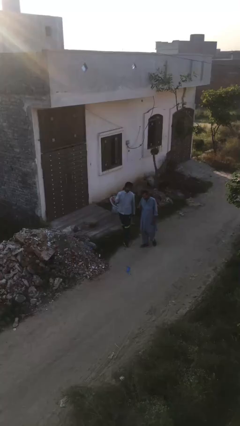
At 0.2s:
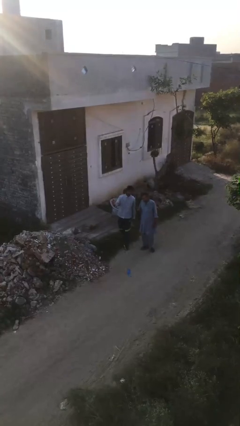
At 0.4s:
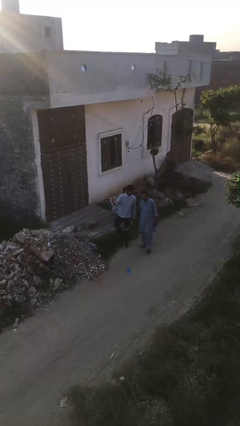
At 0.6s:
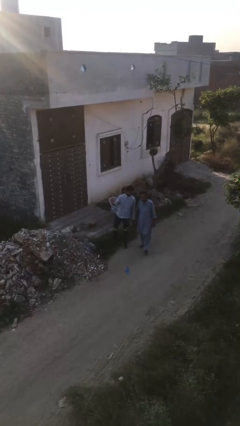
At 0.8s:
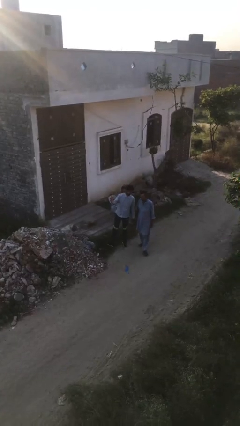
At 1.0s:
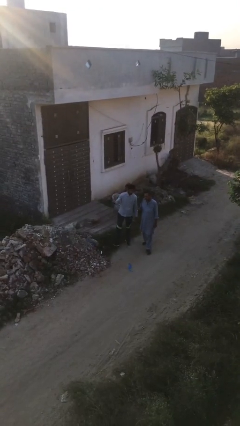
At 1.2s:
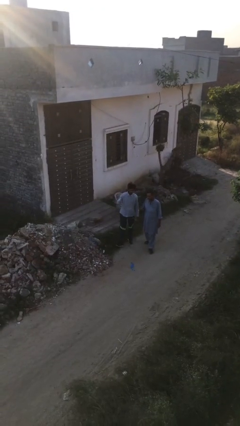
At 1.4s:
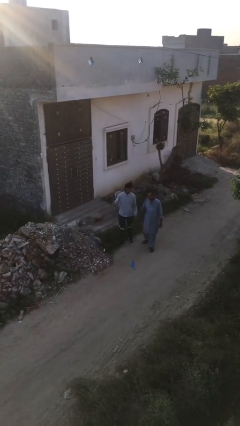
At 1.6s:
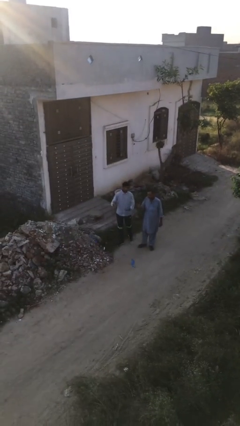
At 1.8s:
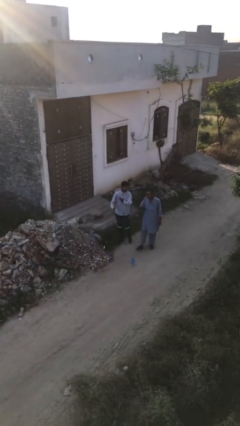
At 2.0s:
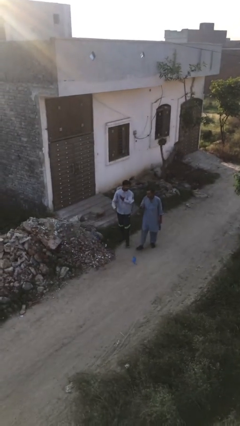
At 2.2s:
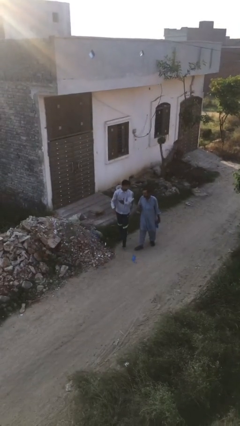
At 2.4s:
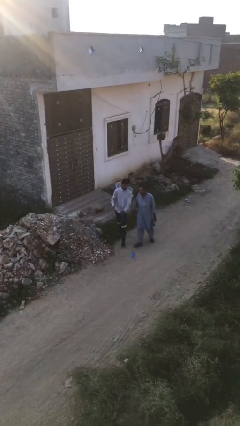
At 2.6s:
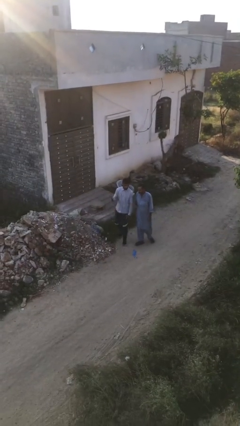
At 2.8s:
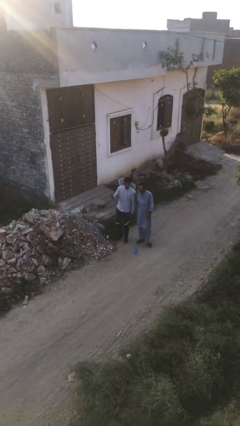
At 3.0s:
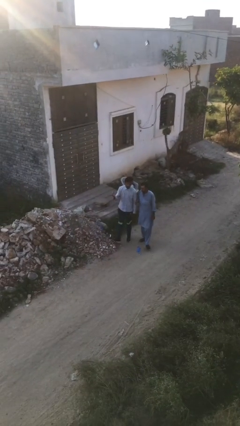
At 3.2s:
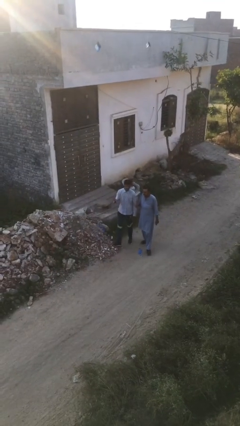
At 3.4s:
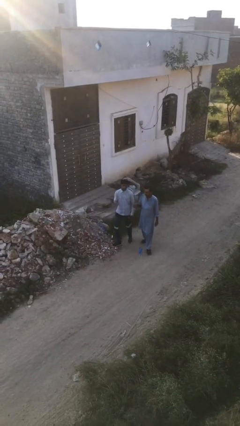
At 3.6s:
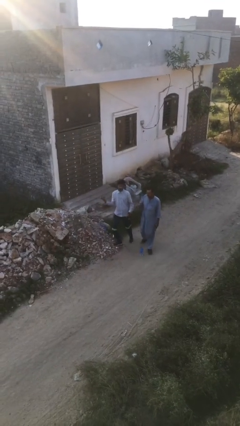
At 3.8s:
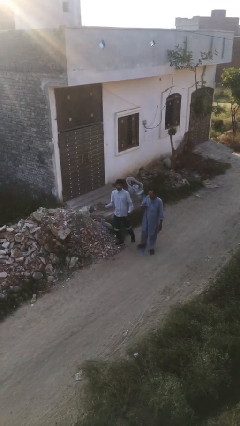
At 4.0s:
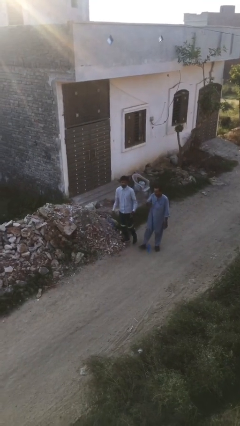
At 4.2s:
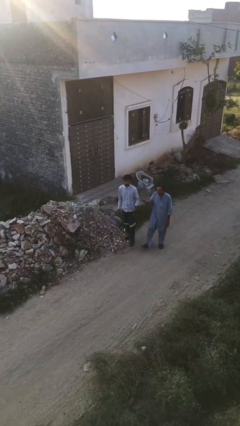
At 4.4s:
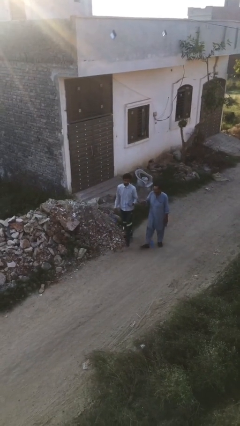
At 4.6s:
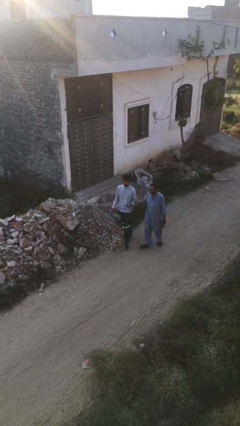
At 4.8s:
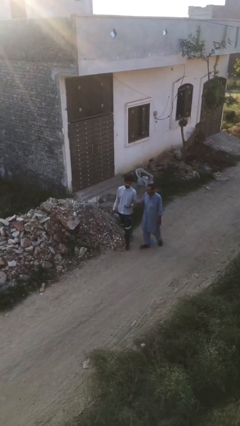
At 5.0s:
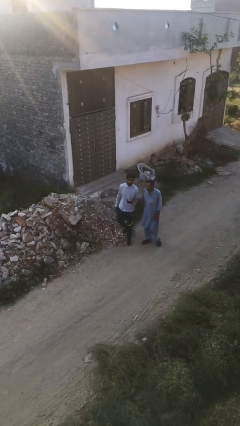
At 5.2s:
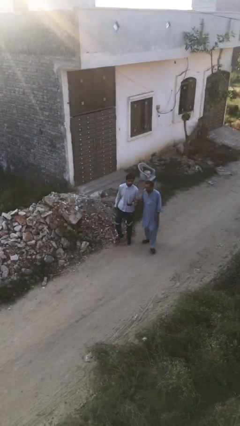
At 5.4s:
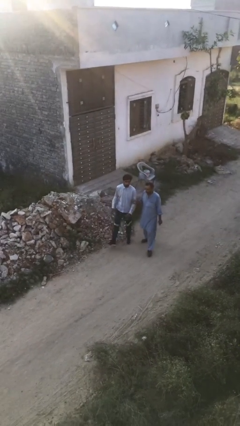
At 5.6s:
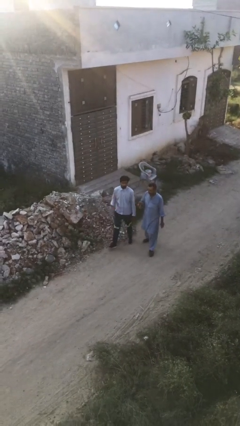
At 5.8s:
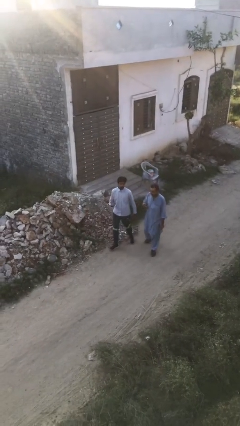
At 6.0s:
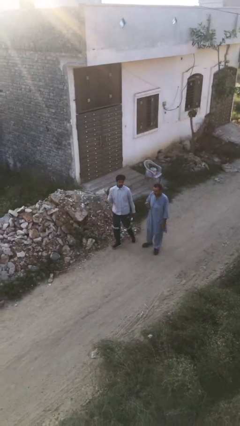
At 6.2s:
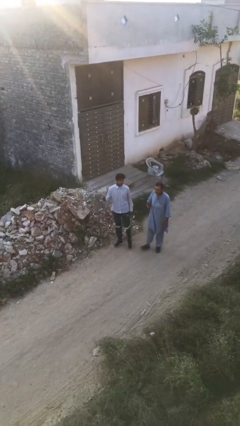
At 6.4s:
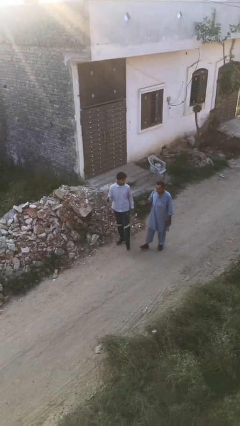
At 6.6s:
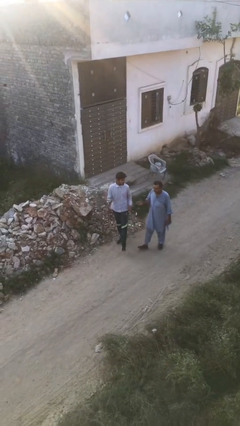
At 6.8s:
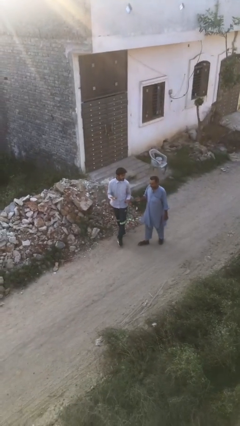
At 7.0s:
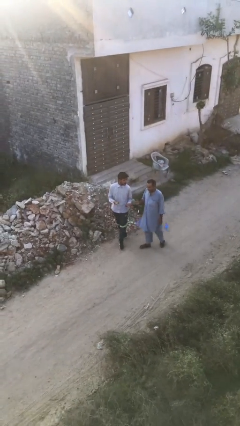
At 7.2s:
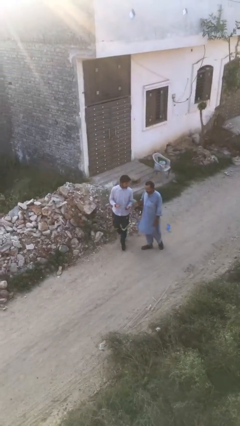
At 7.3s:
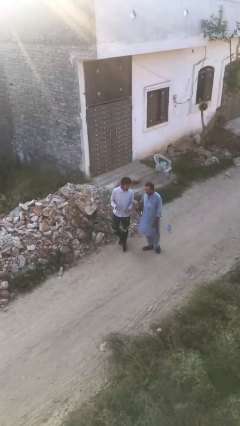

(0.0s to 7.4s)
person talks to person

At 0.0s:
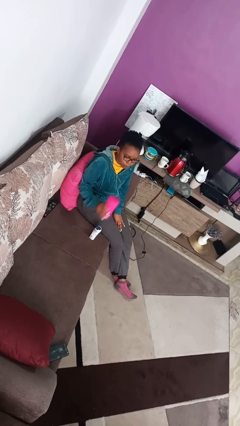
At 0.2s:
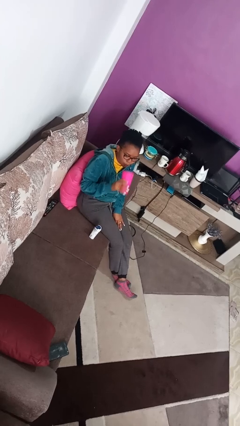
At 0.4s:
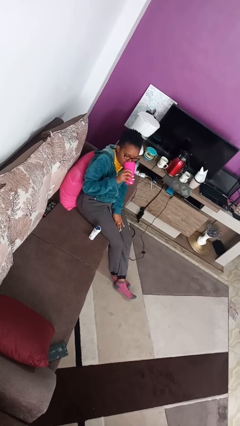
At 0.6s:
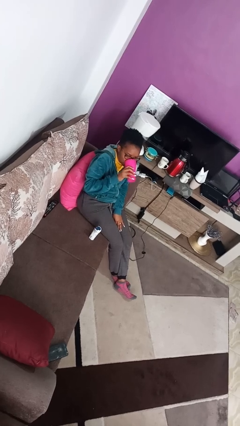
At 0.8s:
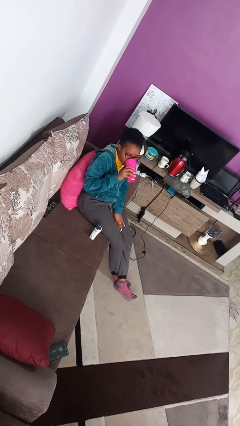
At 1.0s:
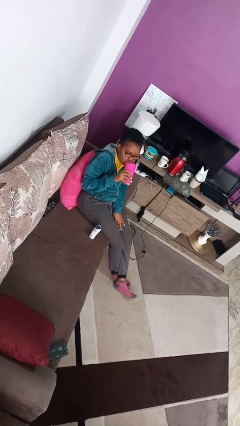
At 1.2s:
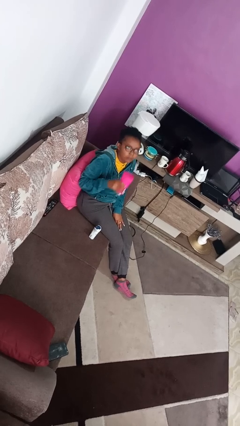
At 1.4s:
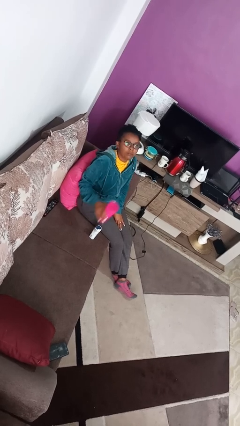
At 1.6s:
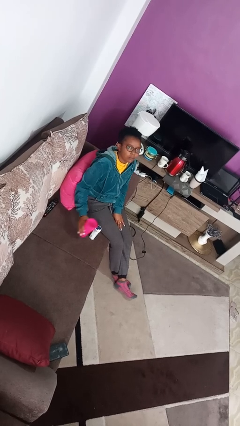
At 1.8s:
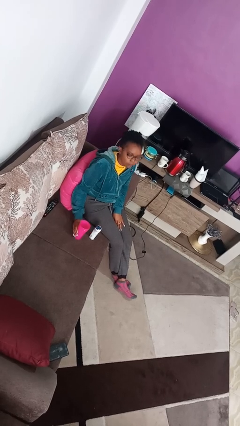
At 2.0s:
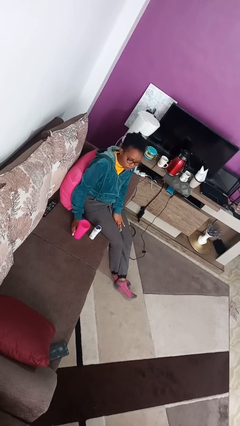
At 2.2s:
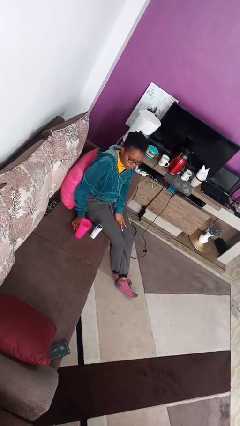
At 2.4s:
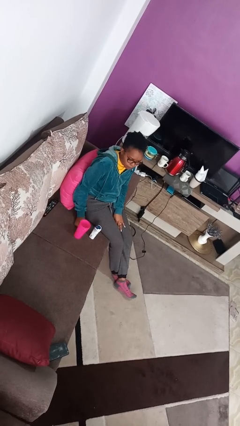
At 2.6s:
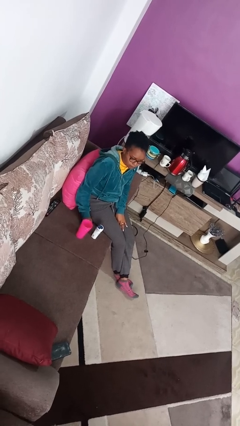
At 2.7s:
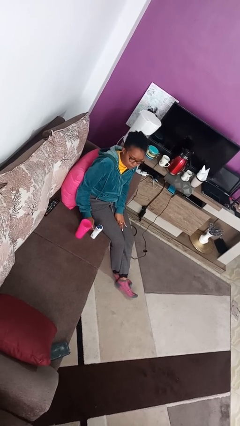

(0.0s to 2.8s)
person drinks from cup

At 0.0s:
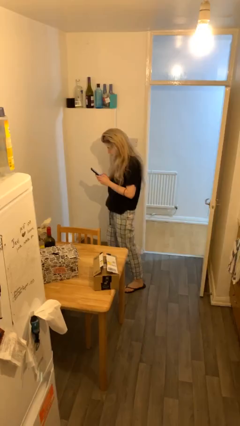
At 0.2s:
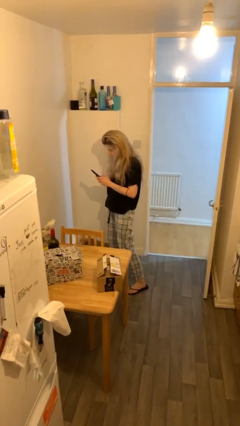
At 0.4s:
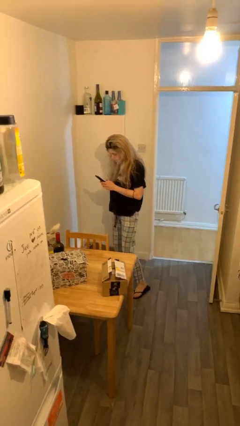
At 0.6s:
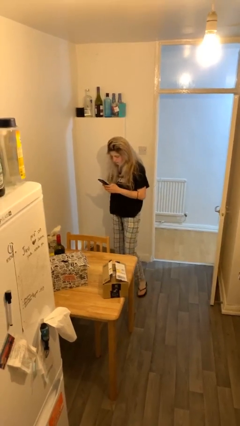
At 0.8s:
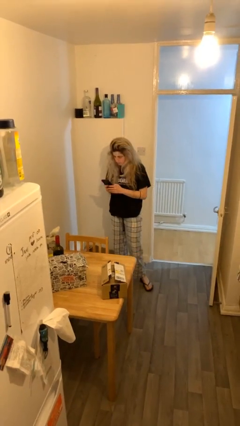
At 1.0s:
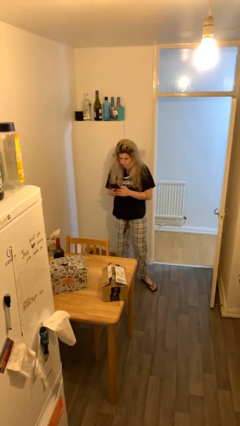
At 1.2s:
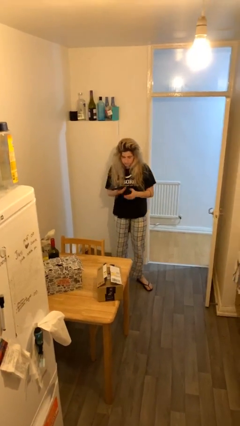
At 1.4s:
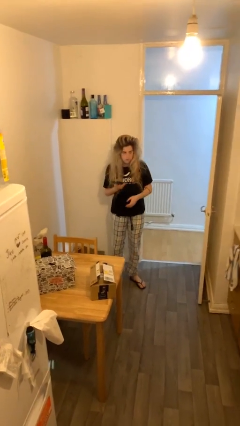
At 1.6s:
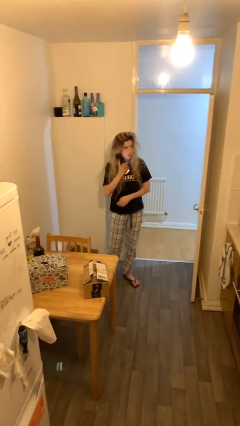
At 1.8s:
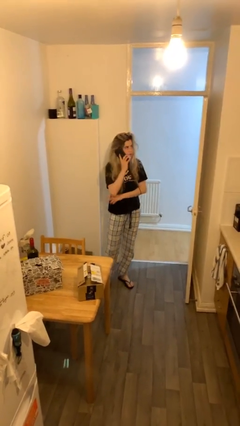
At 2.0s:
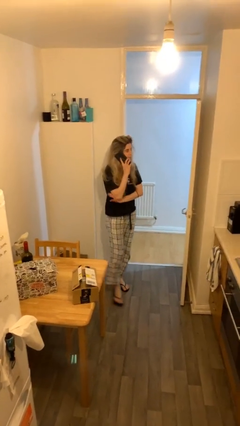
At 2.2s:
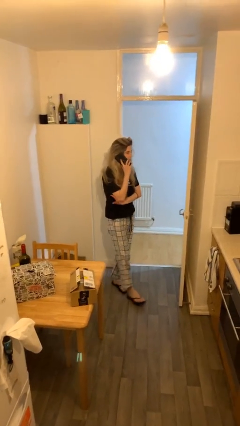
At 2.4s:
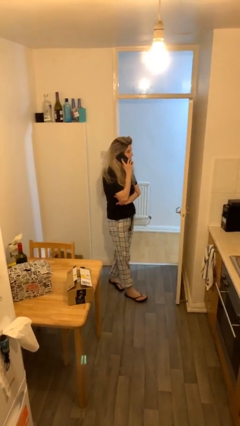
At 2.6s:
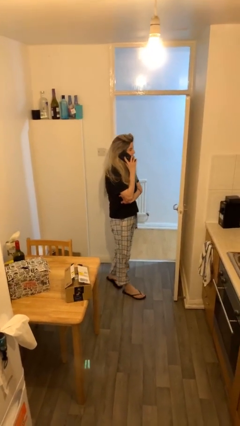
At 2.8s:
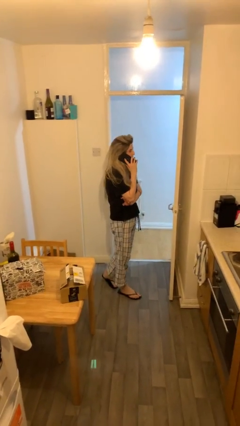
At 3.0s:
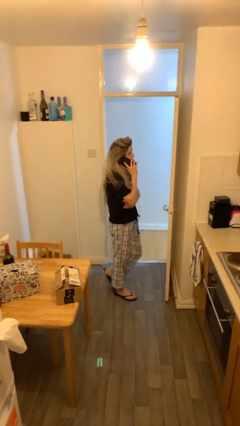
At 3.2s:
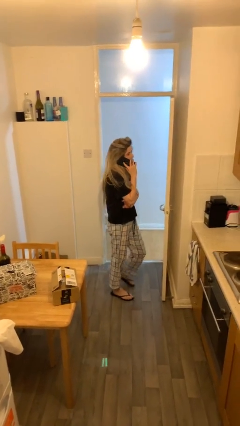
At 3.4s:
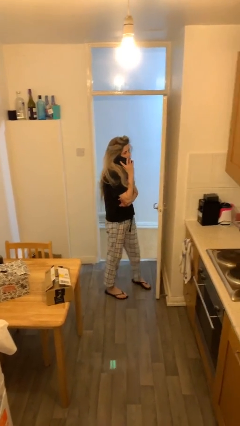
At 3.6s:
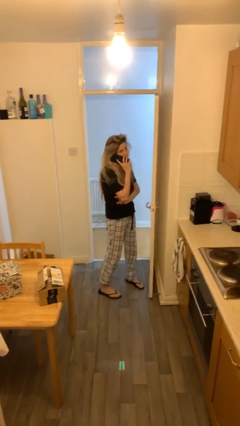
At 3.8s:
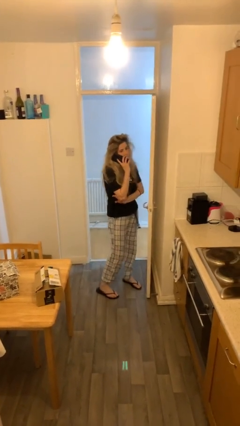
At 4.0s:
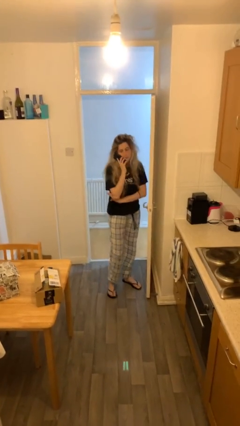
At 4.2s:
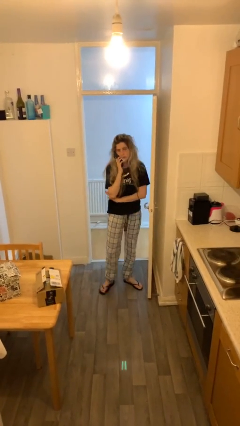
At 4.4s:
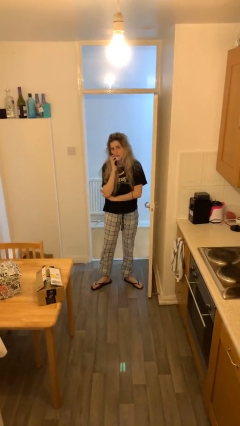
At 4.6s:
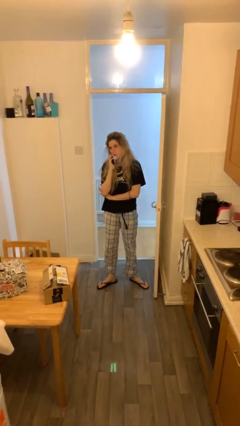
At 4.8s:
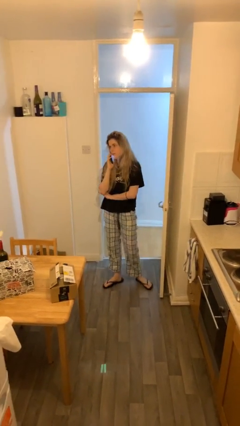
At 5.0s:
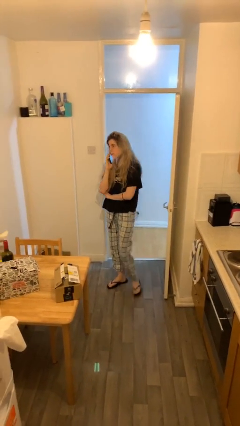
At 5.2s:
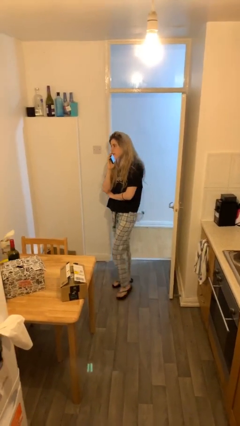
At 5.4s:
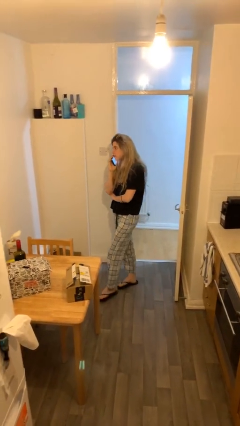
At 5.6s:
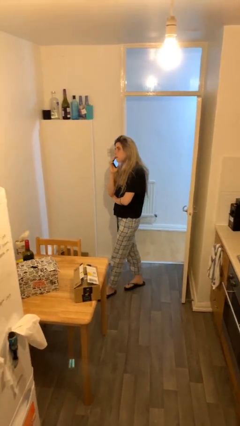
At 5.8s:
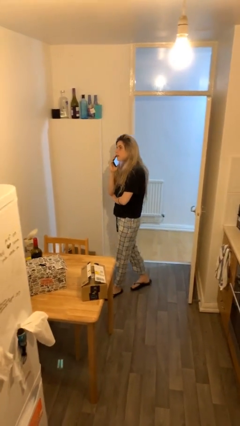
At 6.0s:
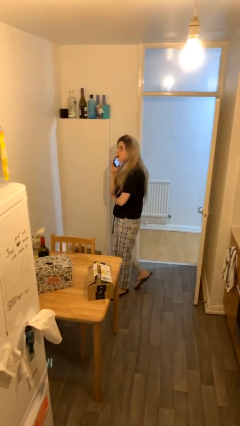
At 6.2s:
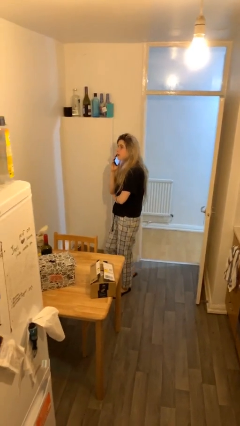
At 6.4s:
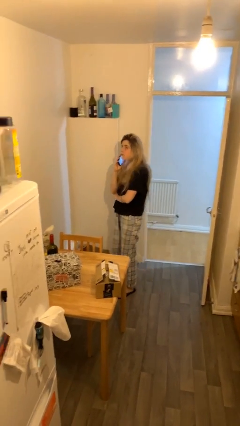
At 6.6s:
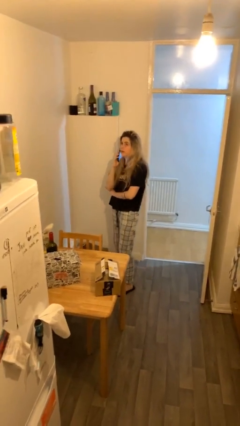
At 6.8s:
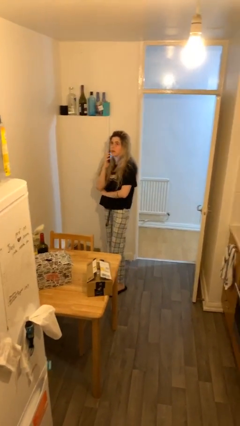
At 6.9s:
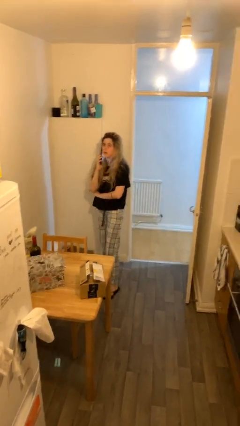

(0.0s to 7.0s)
person talks on phone

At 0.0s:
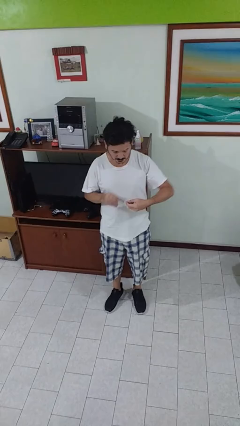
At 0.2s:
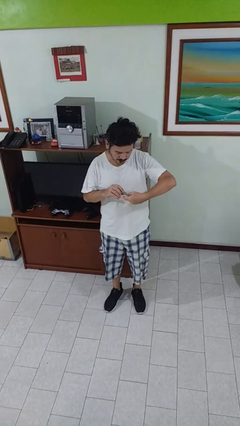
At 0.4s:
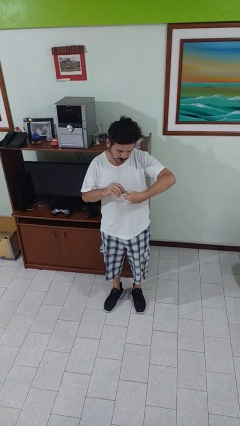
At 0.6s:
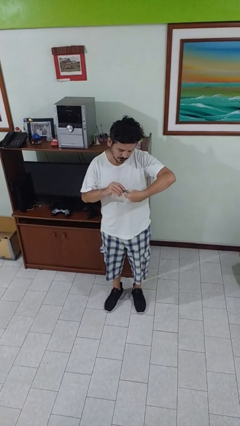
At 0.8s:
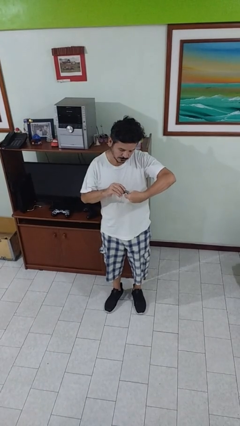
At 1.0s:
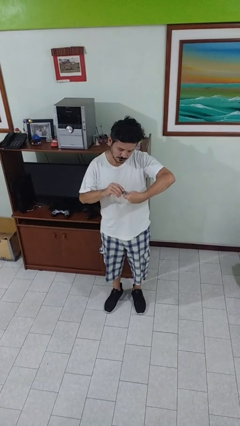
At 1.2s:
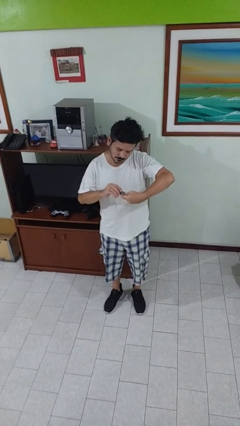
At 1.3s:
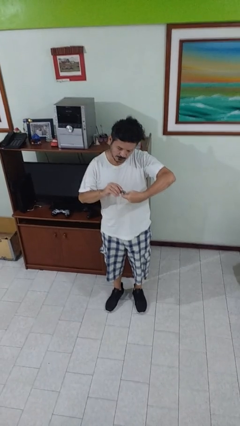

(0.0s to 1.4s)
person clips fingernails
